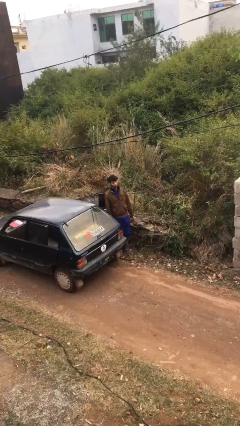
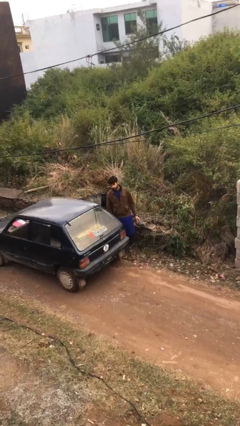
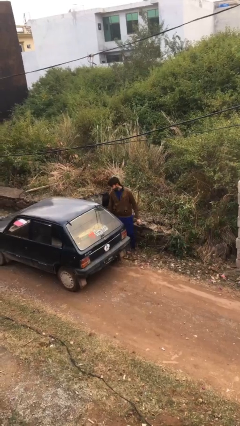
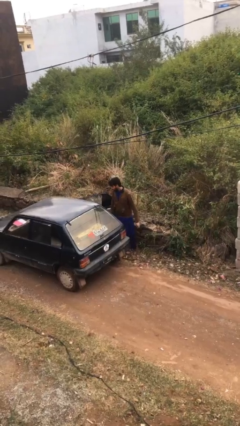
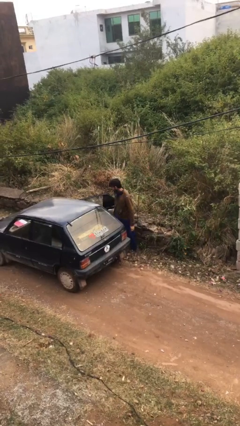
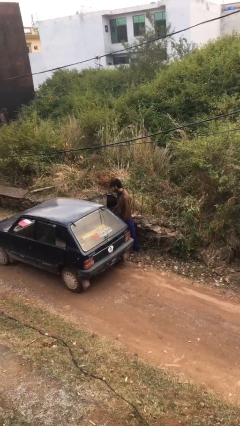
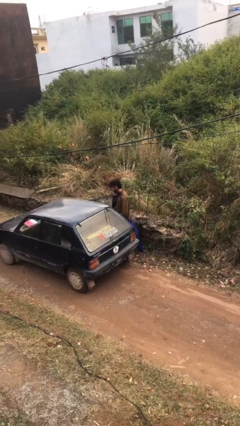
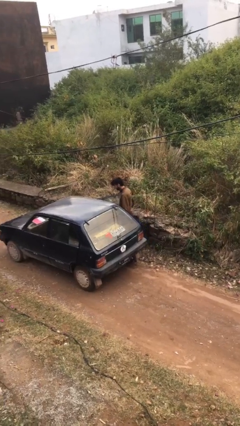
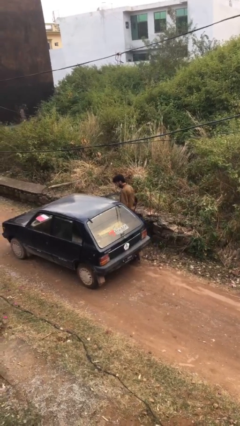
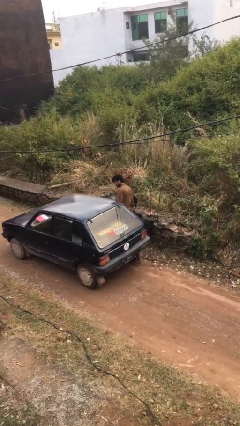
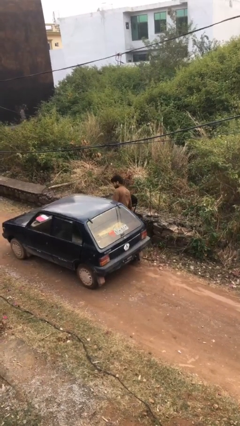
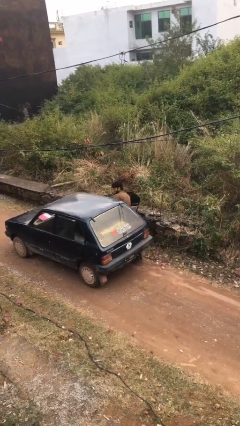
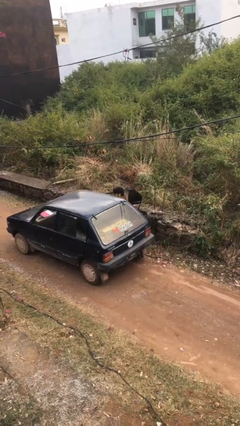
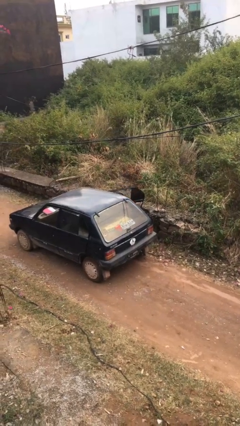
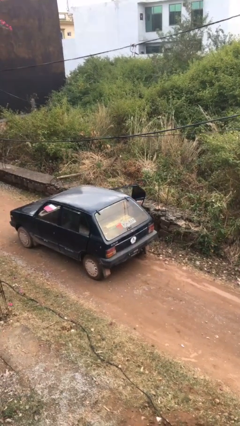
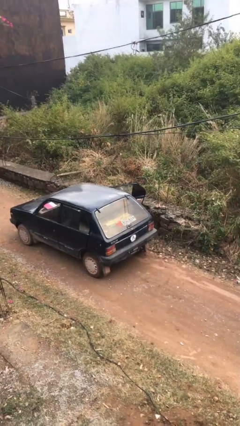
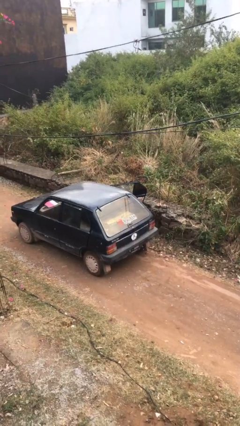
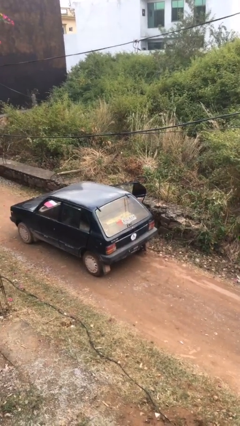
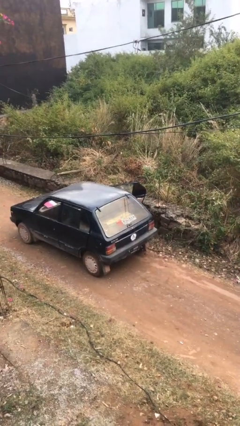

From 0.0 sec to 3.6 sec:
person enters car

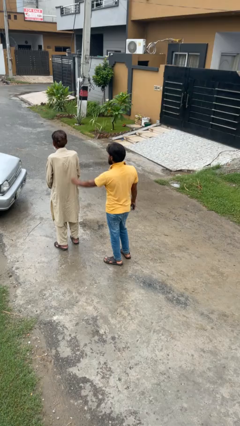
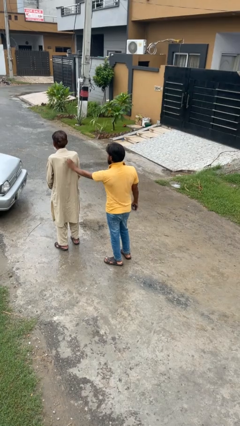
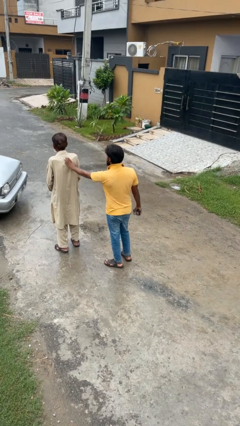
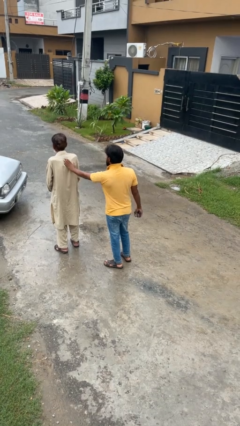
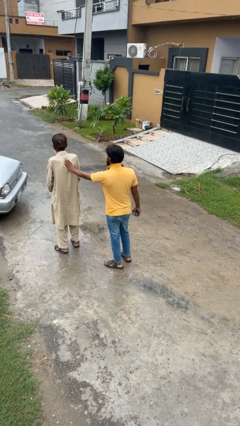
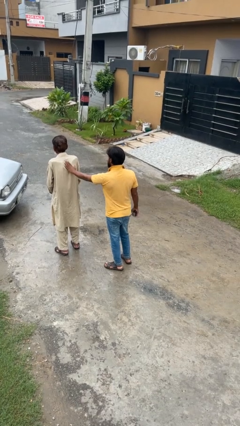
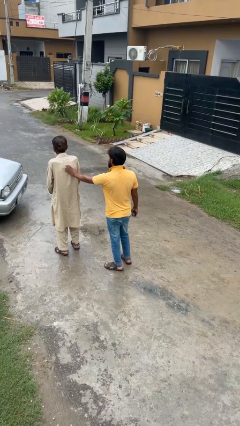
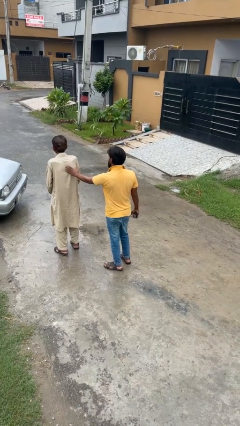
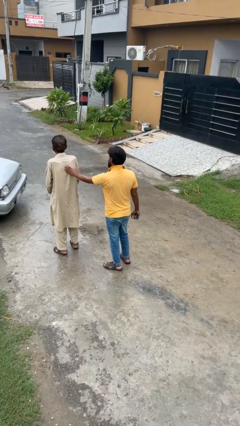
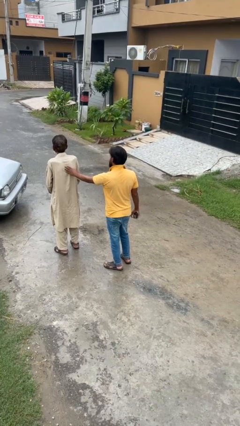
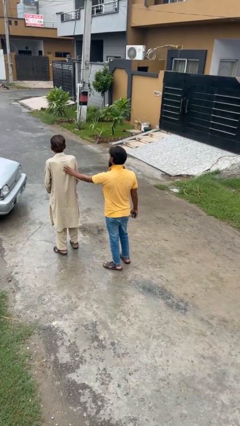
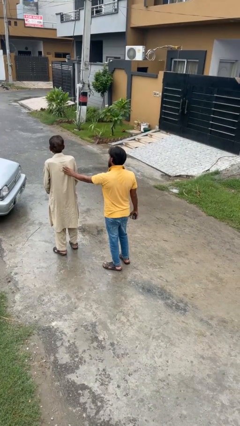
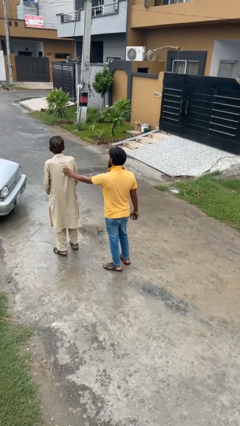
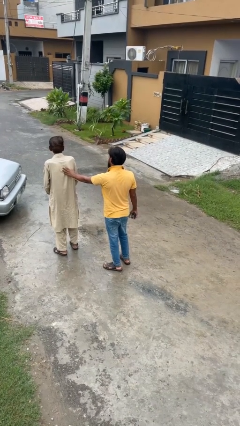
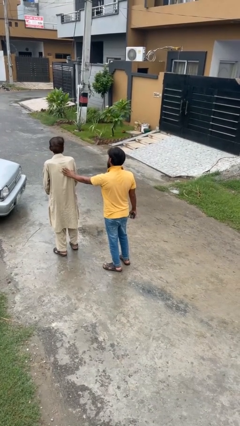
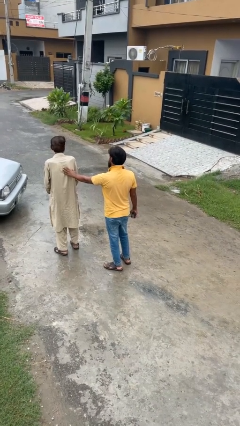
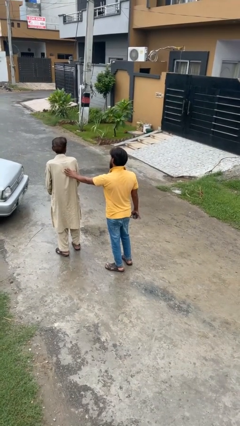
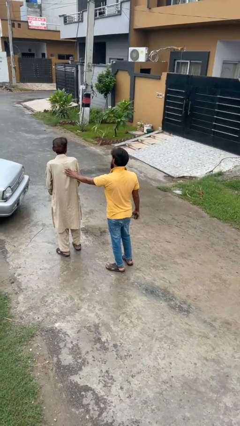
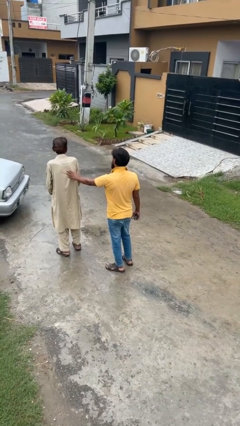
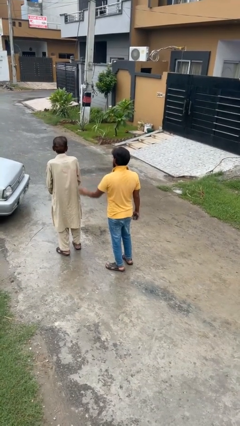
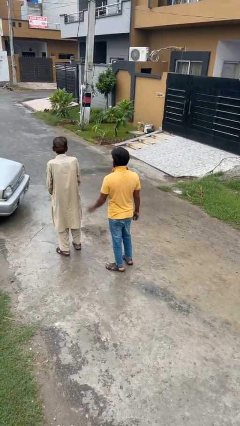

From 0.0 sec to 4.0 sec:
person touches back of person

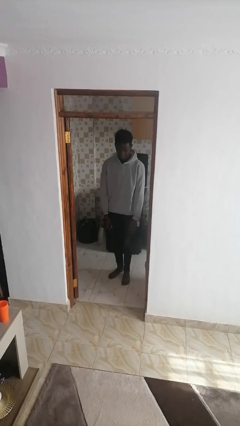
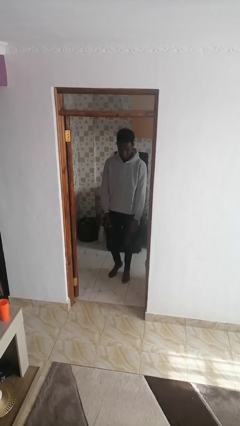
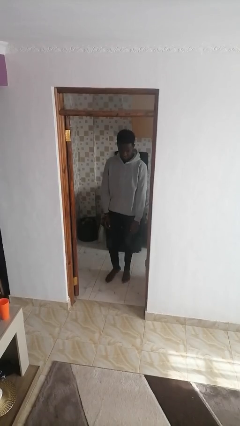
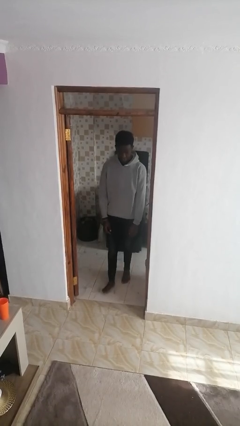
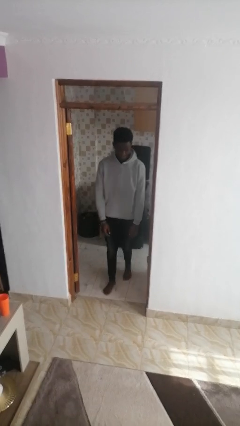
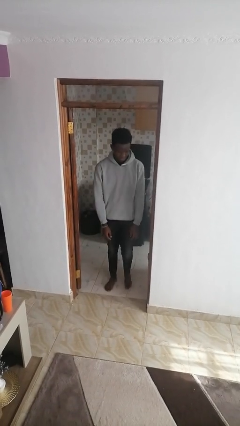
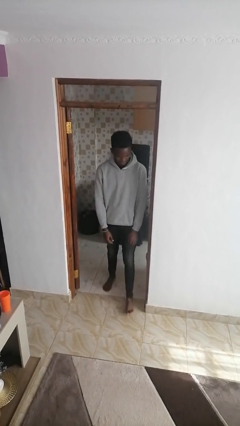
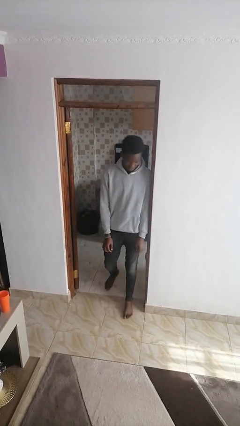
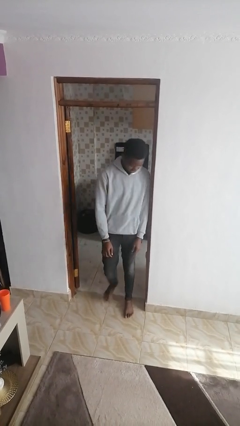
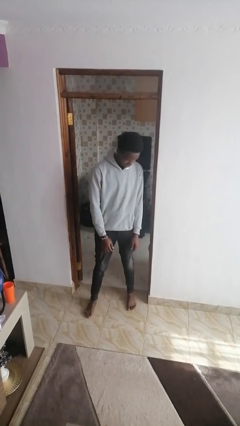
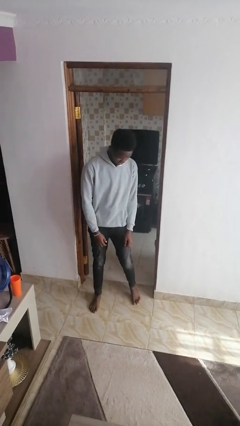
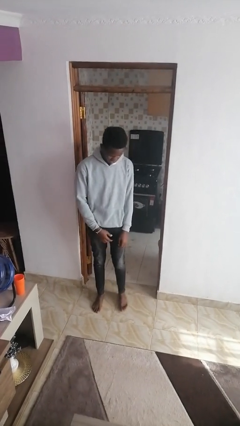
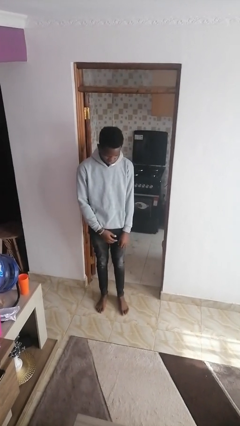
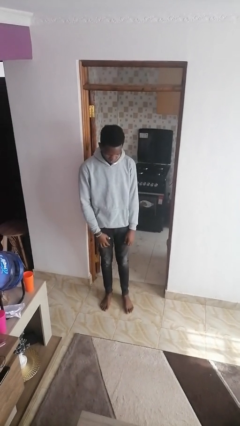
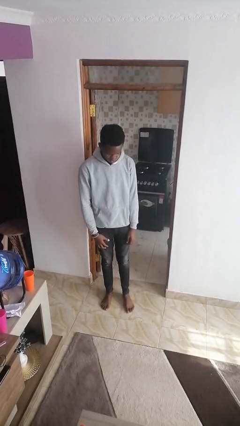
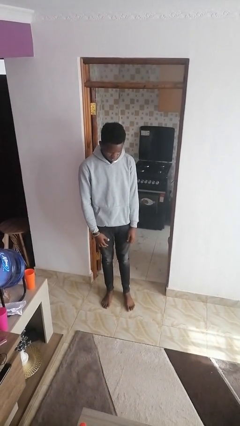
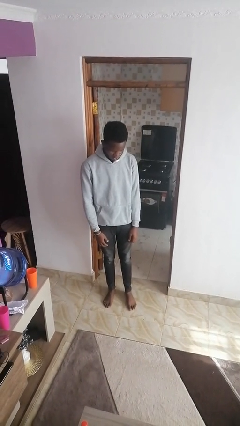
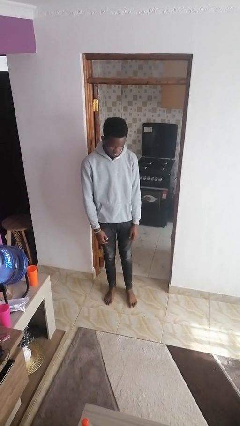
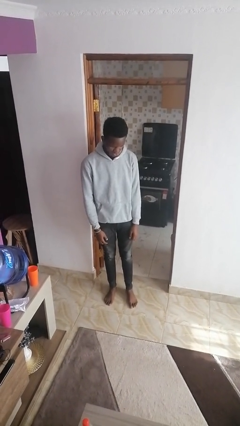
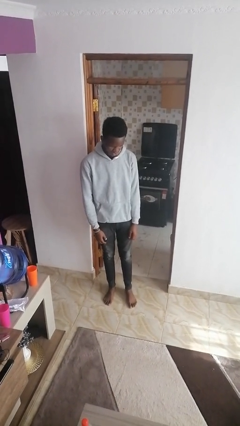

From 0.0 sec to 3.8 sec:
person bumps into wall

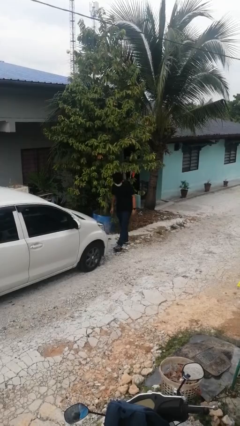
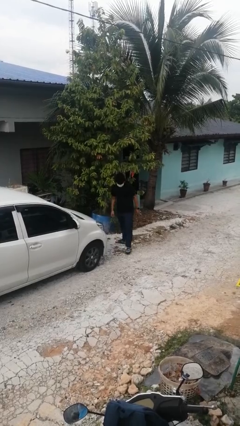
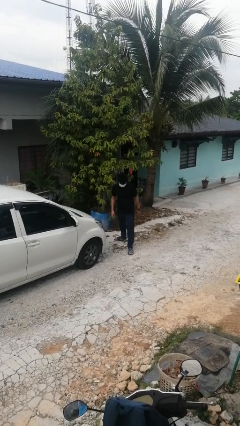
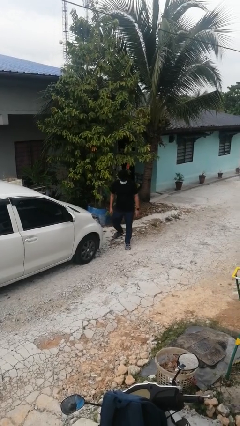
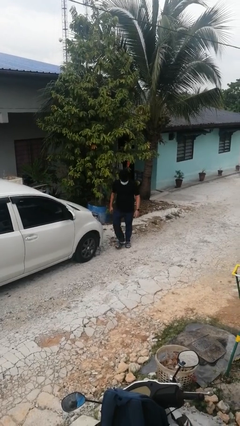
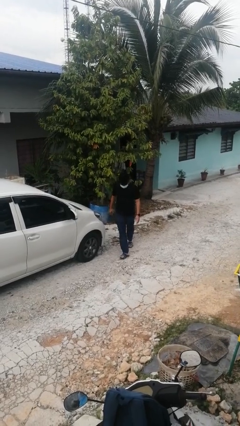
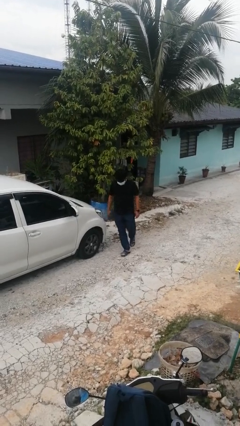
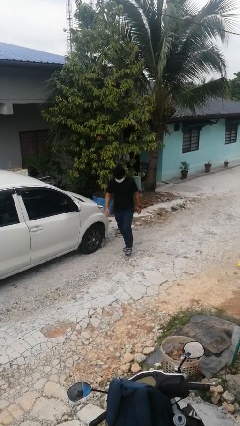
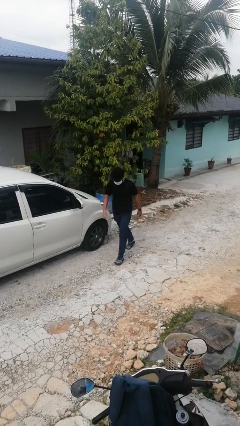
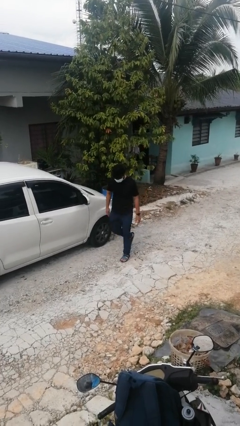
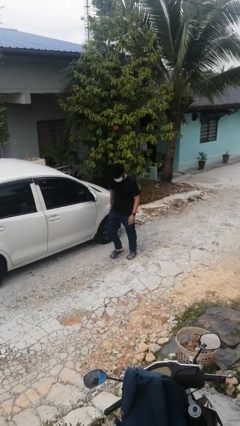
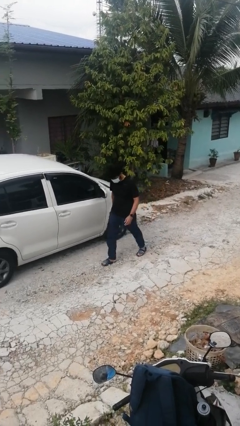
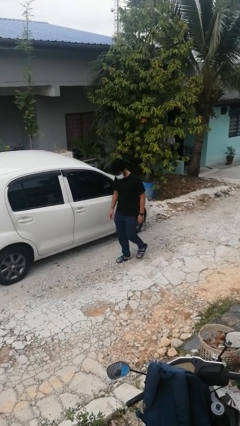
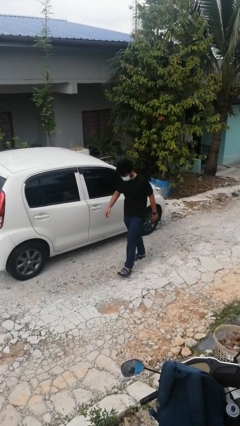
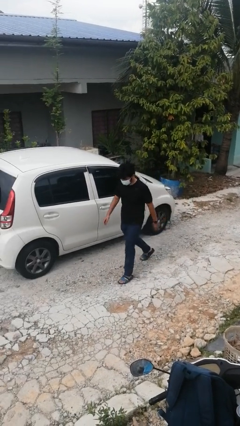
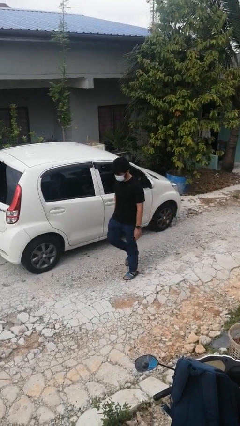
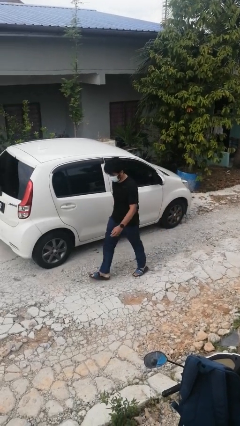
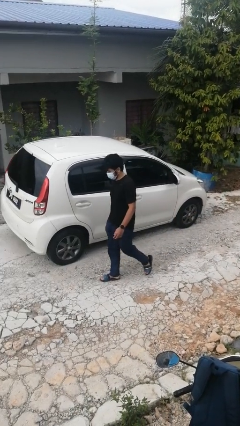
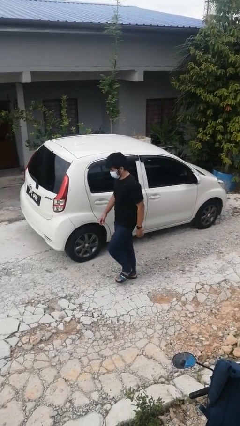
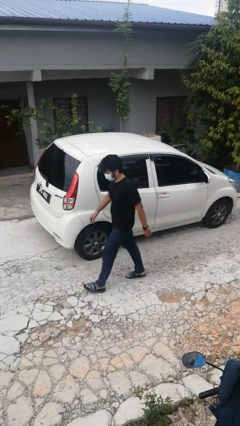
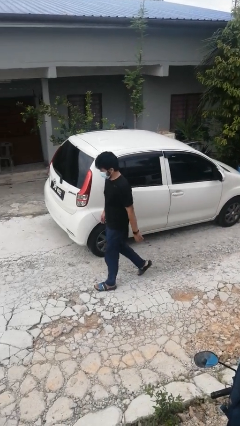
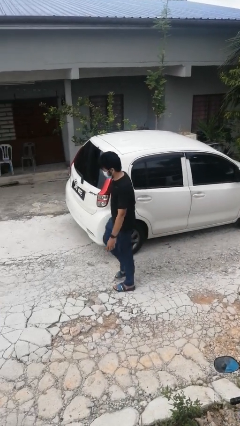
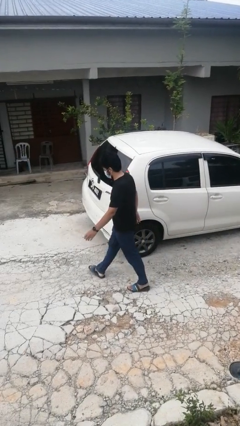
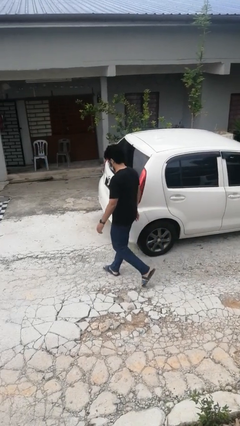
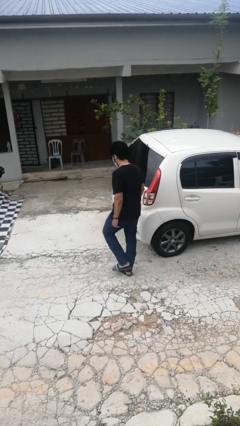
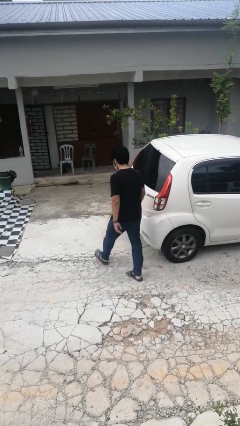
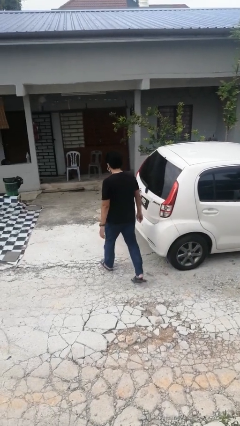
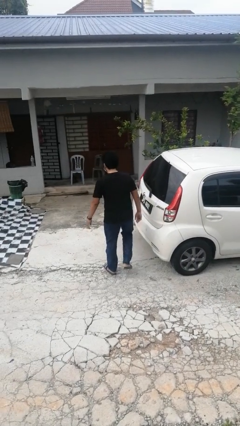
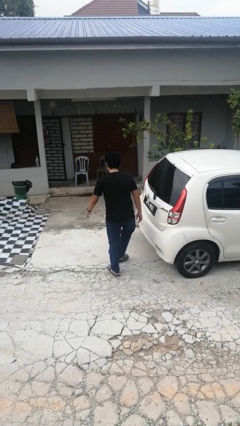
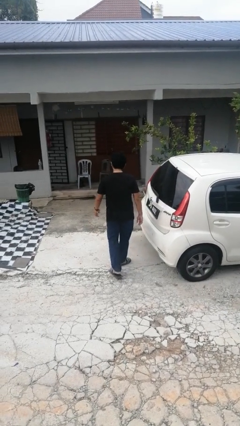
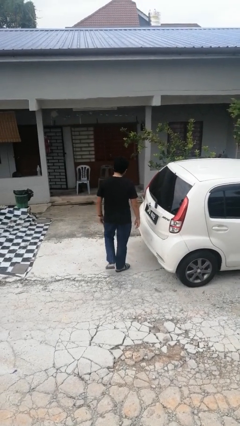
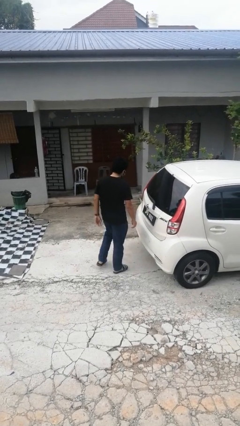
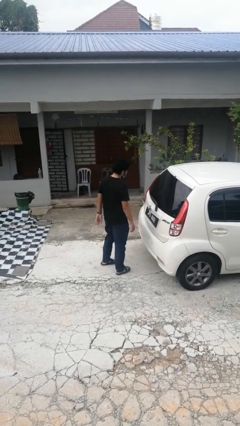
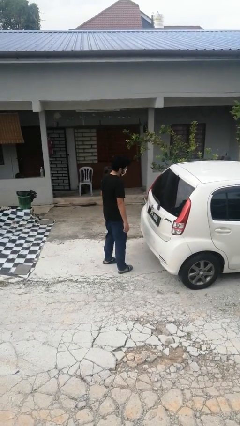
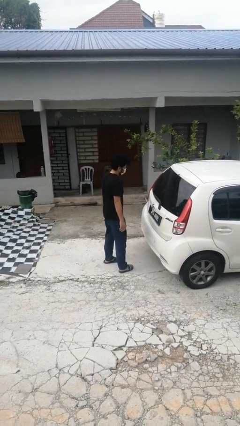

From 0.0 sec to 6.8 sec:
person walks around car

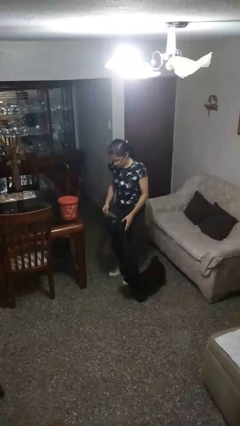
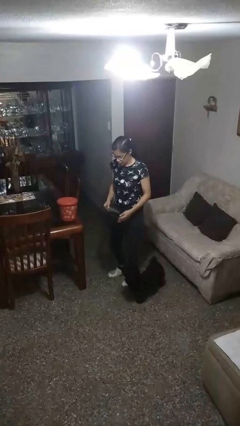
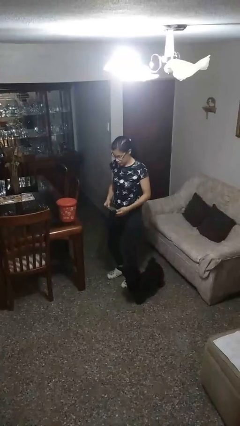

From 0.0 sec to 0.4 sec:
person picks up object from floor
